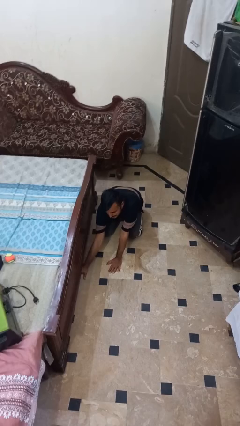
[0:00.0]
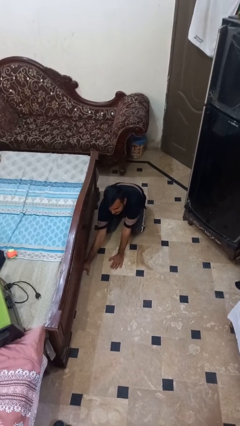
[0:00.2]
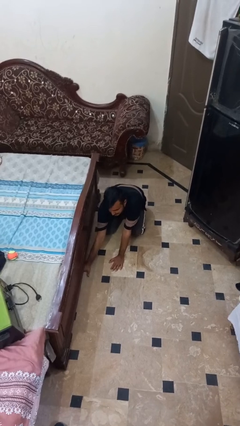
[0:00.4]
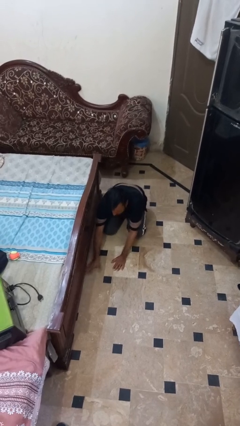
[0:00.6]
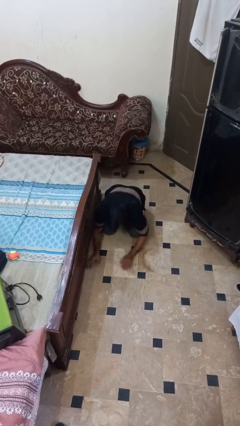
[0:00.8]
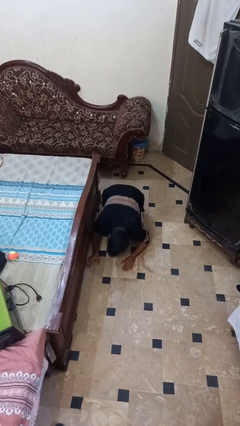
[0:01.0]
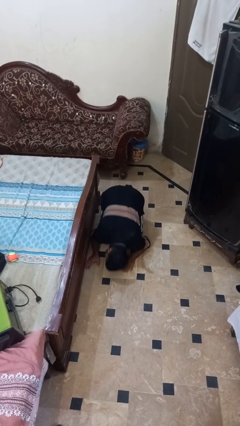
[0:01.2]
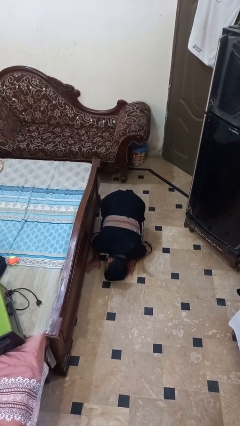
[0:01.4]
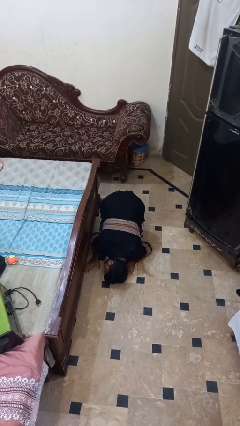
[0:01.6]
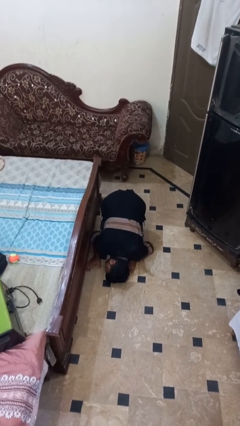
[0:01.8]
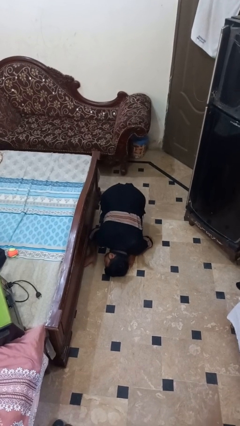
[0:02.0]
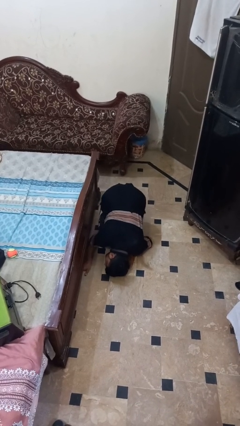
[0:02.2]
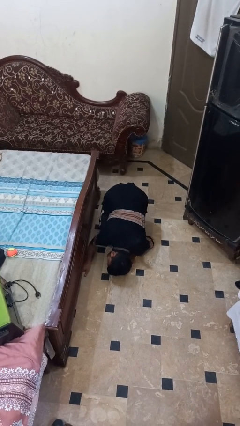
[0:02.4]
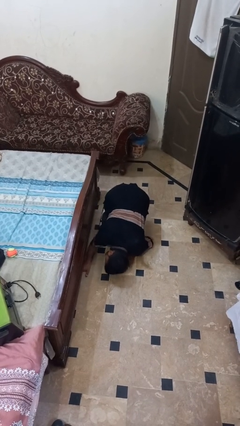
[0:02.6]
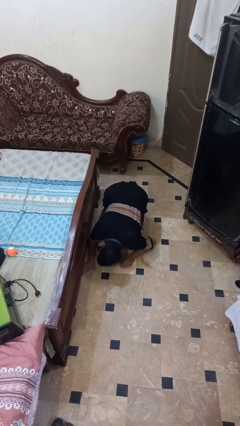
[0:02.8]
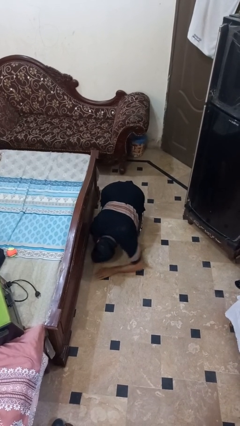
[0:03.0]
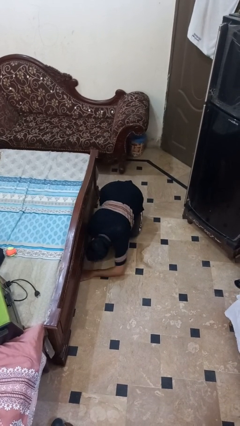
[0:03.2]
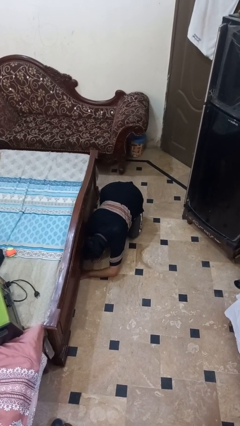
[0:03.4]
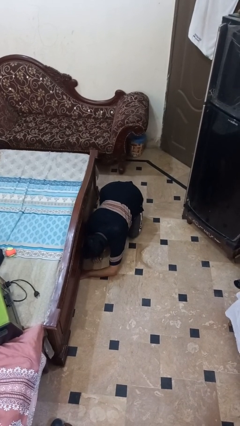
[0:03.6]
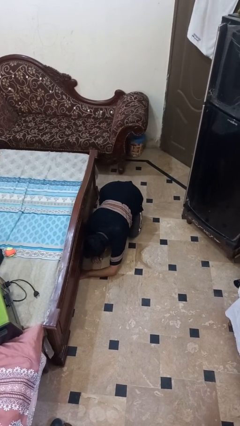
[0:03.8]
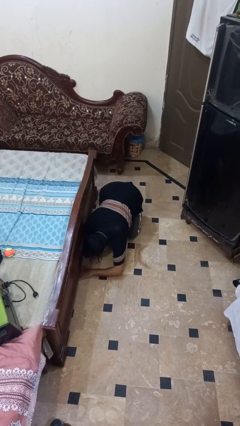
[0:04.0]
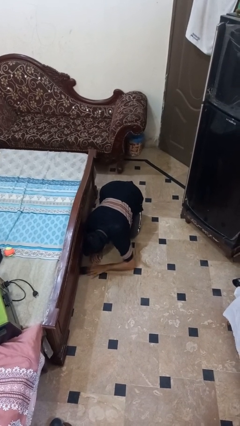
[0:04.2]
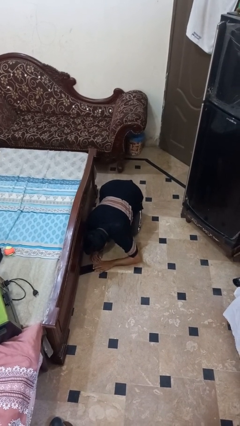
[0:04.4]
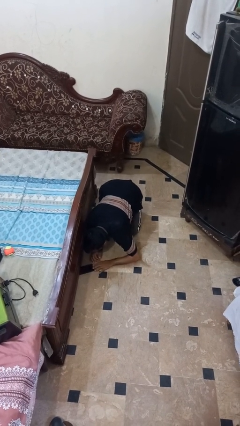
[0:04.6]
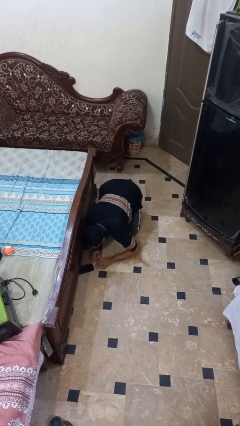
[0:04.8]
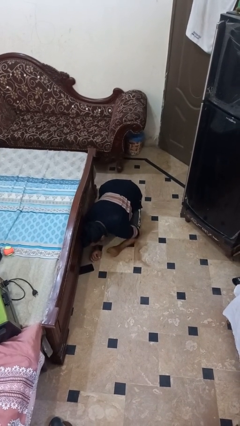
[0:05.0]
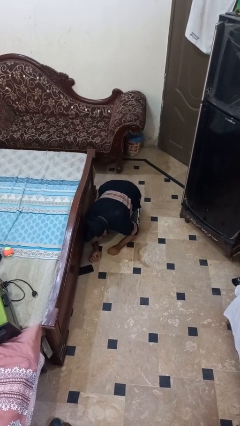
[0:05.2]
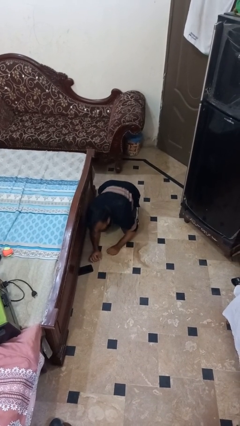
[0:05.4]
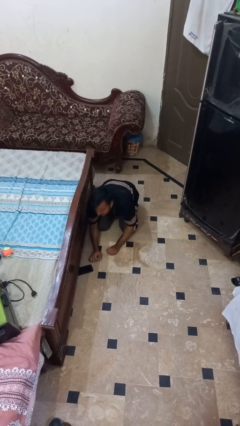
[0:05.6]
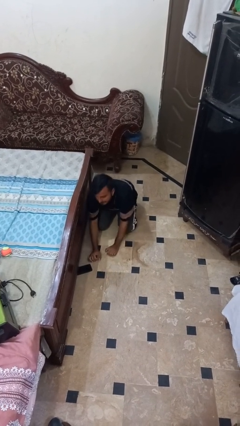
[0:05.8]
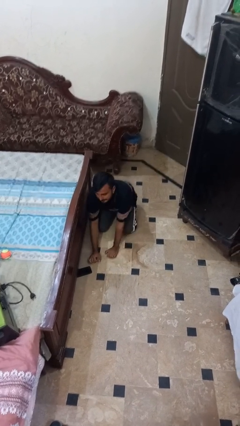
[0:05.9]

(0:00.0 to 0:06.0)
person searches under bed

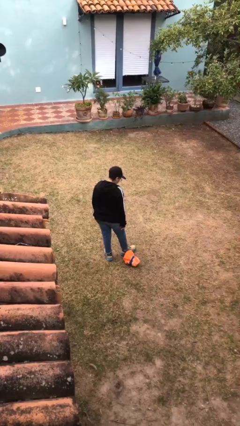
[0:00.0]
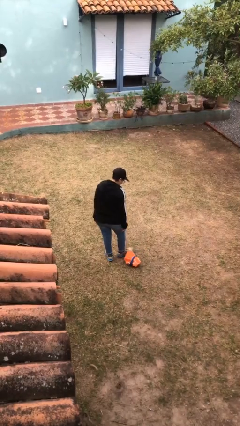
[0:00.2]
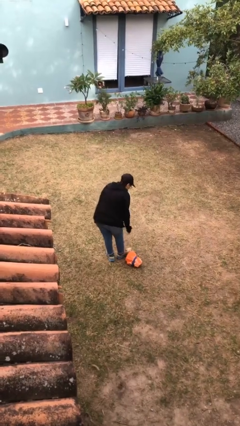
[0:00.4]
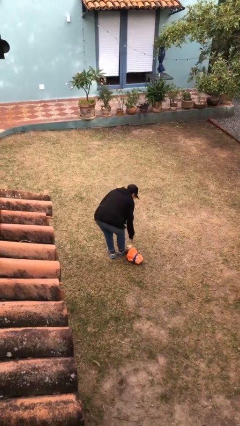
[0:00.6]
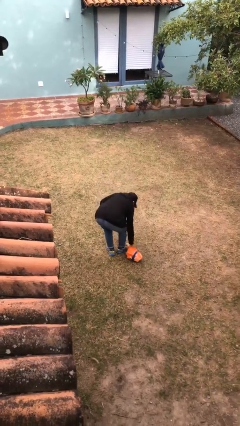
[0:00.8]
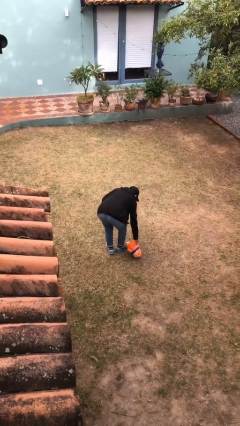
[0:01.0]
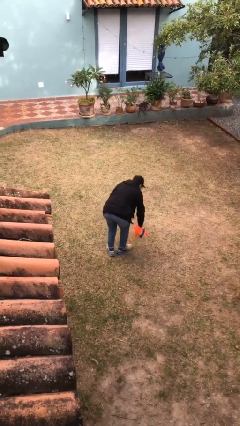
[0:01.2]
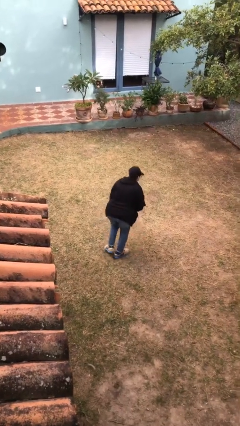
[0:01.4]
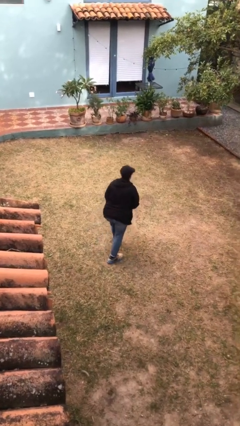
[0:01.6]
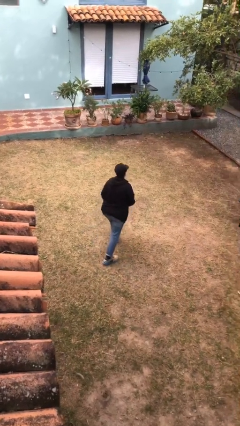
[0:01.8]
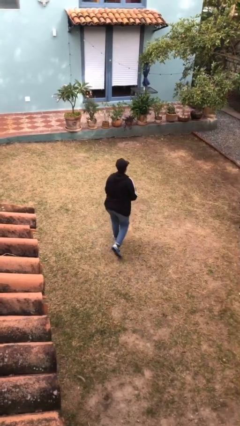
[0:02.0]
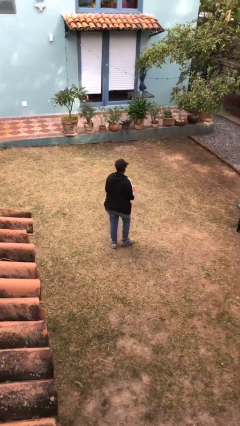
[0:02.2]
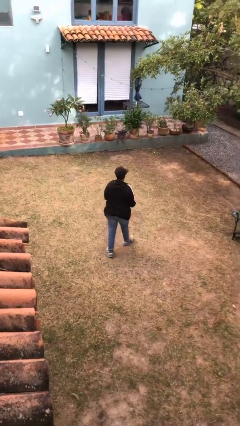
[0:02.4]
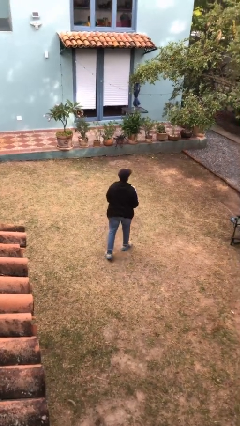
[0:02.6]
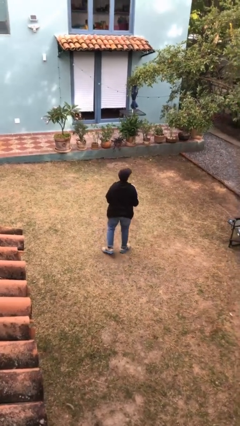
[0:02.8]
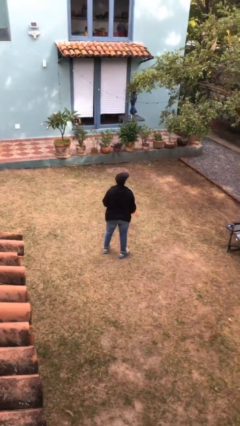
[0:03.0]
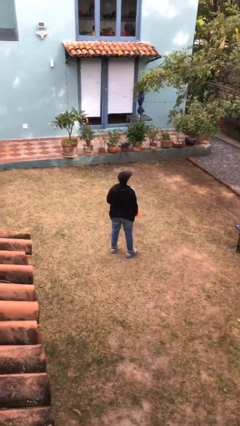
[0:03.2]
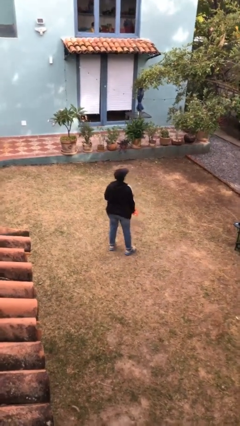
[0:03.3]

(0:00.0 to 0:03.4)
person picks up object from floor

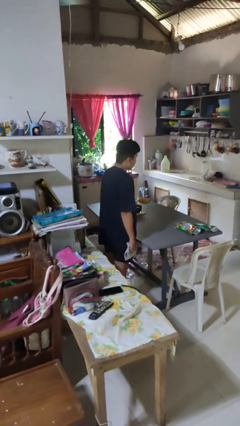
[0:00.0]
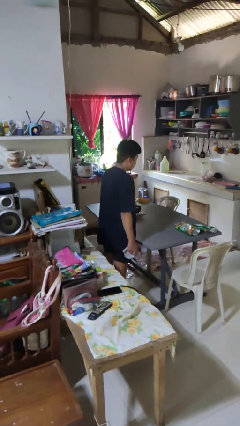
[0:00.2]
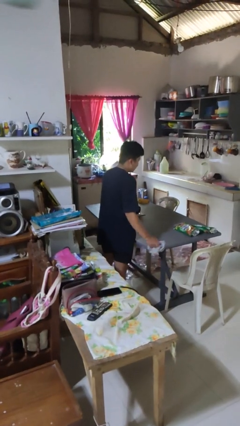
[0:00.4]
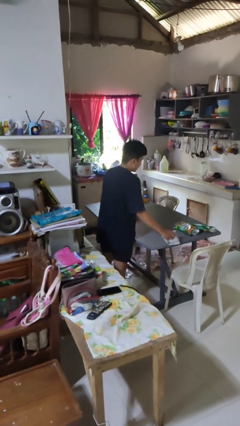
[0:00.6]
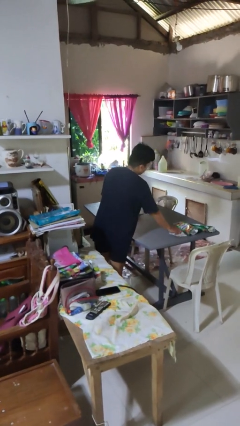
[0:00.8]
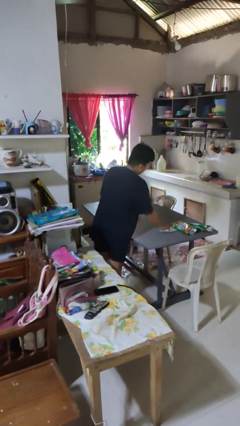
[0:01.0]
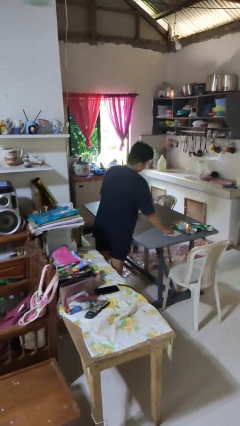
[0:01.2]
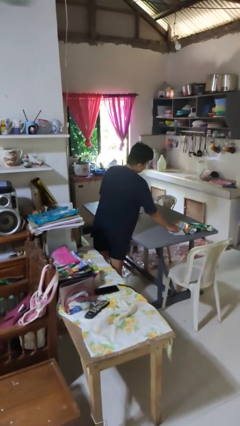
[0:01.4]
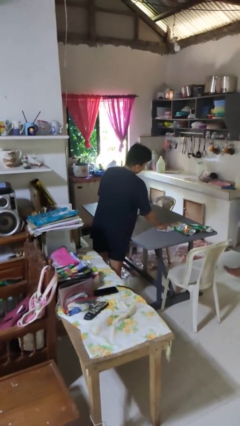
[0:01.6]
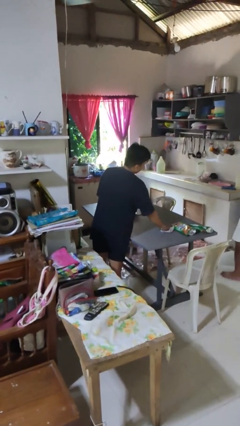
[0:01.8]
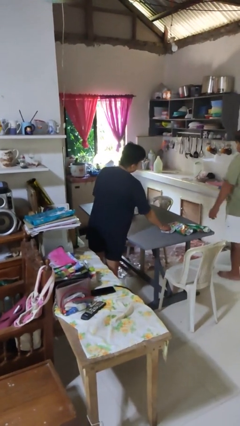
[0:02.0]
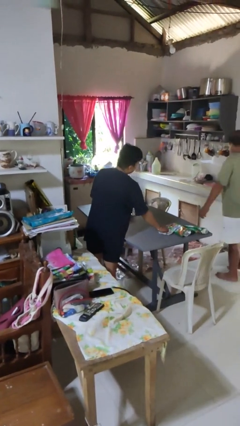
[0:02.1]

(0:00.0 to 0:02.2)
person cleans table with rag

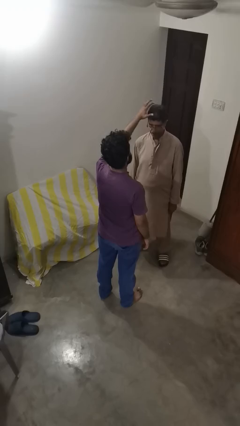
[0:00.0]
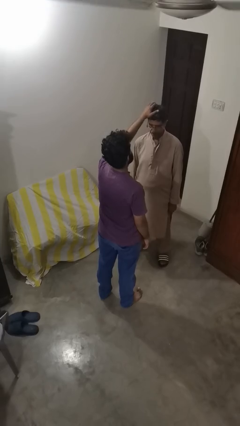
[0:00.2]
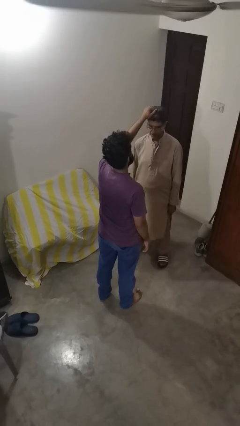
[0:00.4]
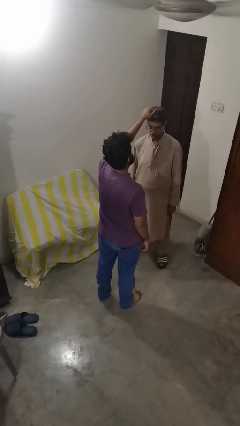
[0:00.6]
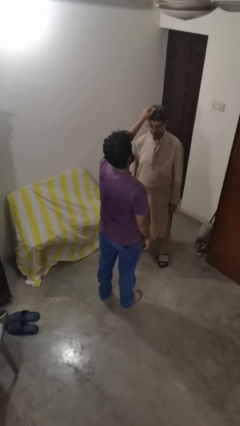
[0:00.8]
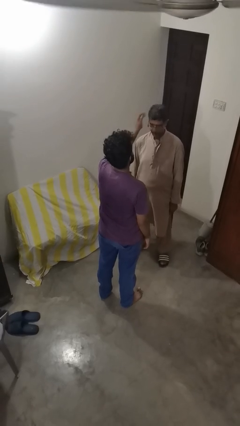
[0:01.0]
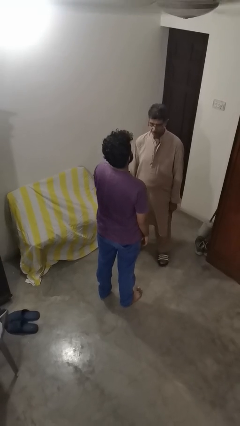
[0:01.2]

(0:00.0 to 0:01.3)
person grabs person by hair

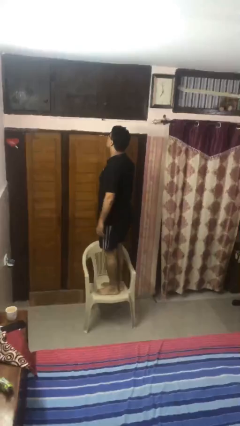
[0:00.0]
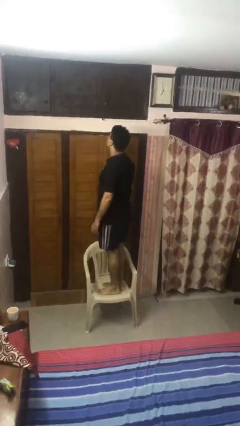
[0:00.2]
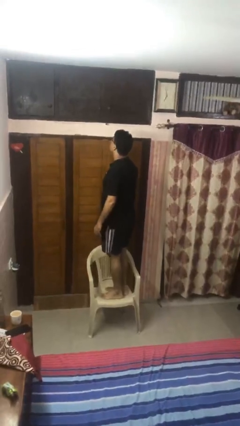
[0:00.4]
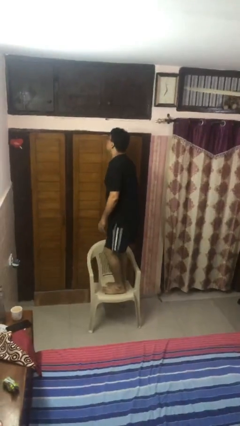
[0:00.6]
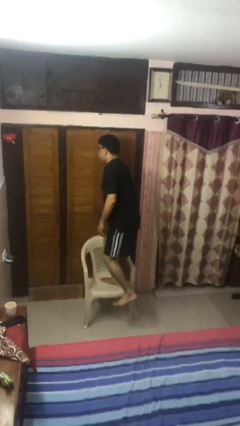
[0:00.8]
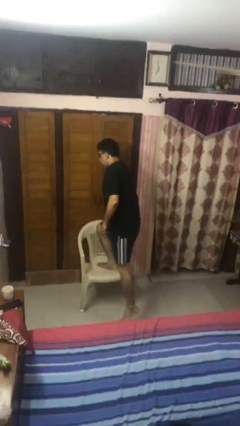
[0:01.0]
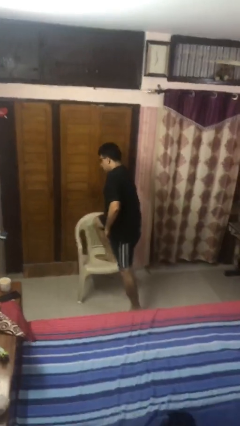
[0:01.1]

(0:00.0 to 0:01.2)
person climbs off chair

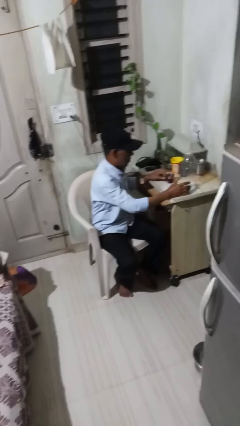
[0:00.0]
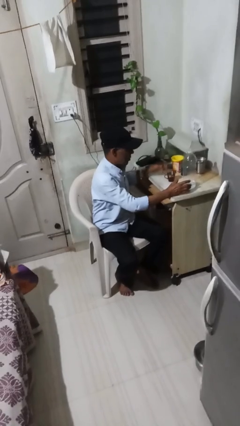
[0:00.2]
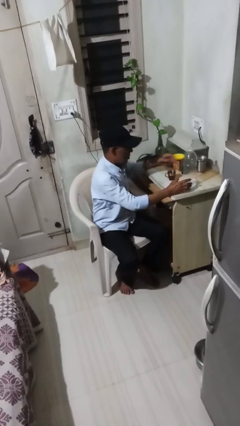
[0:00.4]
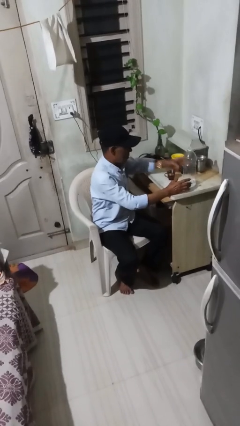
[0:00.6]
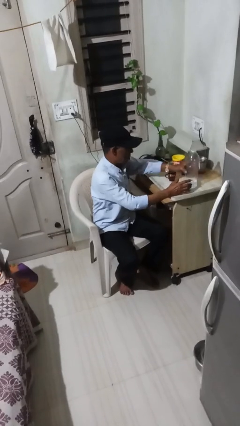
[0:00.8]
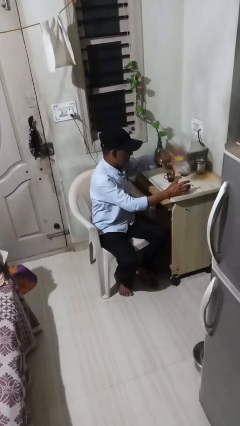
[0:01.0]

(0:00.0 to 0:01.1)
person pours liquid into cup

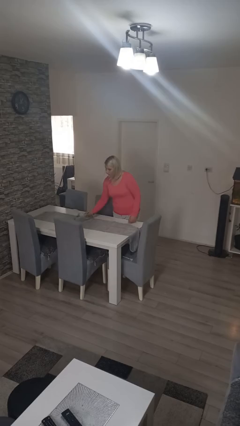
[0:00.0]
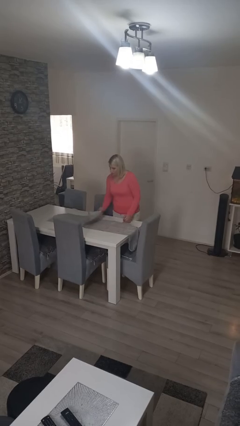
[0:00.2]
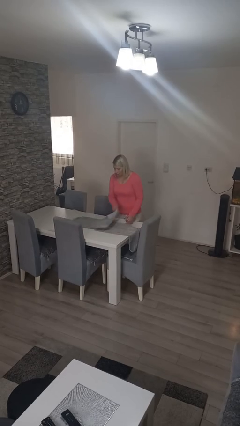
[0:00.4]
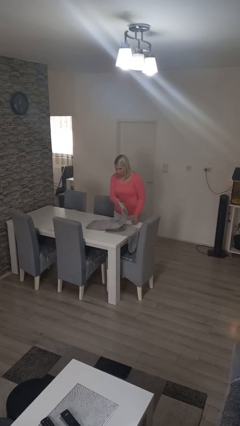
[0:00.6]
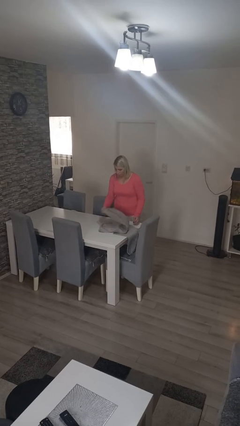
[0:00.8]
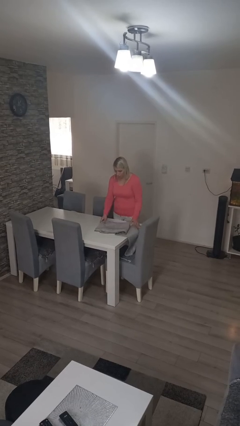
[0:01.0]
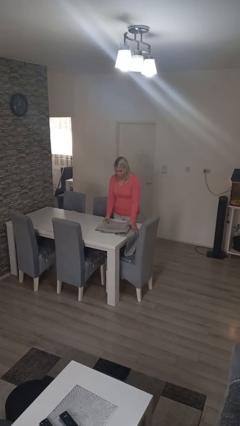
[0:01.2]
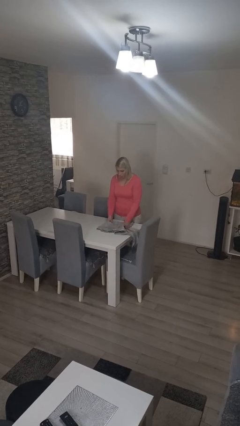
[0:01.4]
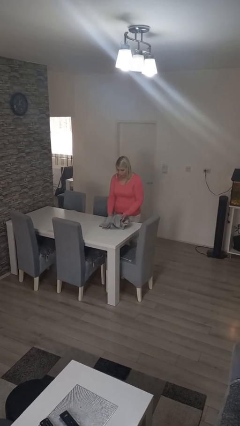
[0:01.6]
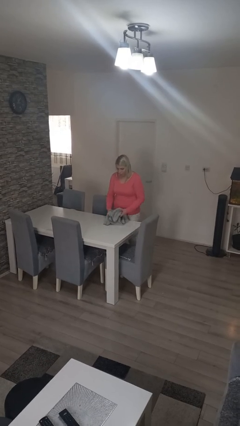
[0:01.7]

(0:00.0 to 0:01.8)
person folds tablecloth

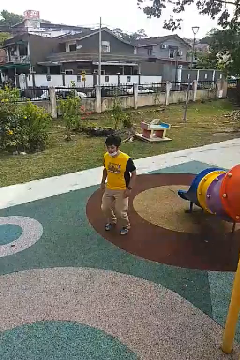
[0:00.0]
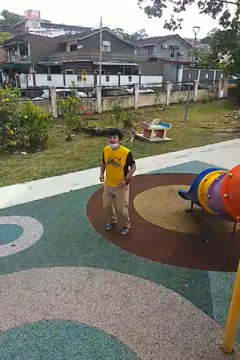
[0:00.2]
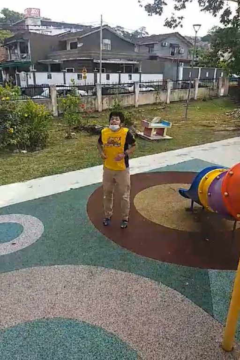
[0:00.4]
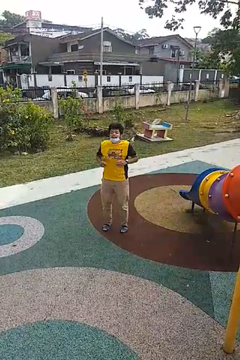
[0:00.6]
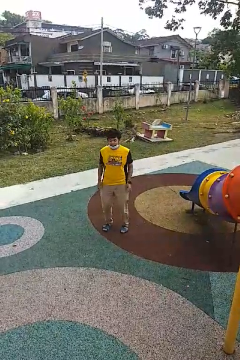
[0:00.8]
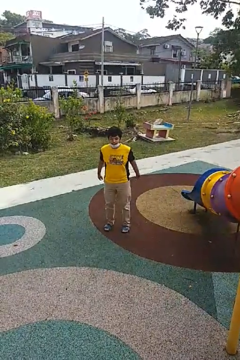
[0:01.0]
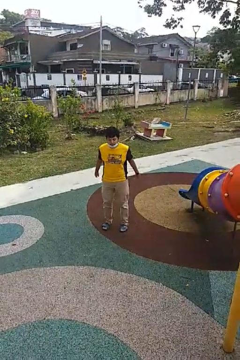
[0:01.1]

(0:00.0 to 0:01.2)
person jumps
